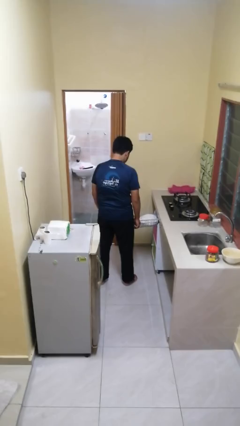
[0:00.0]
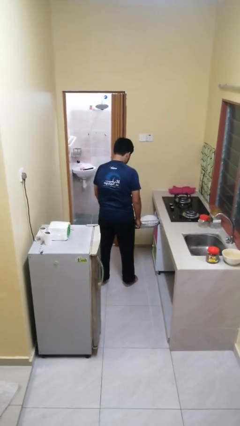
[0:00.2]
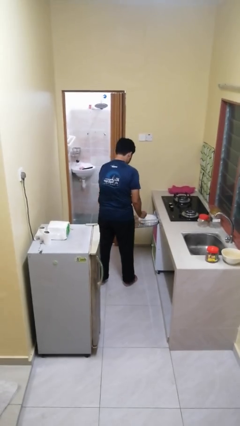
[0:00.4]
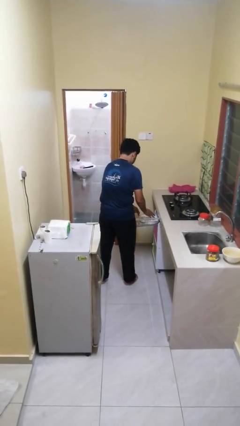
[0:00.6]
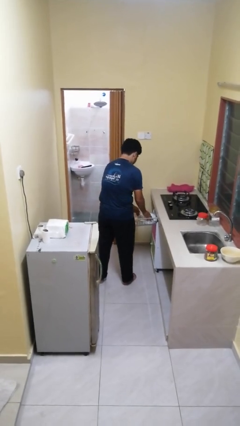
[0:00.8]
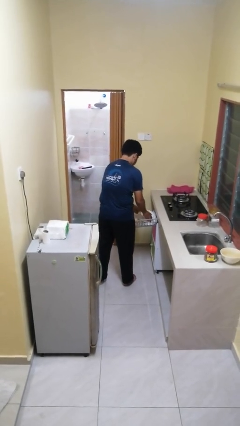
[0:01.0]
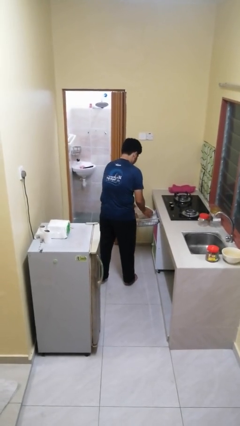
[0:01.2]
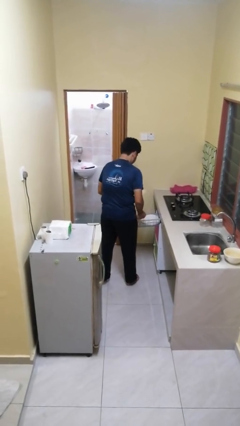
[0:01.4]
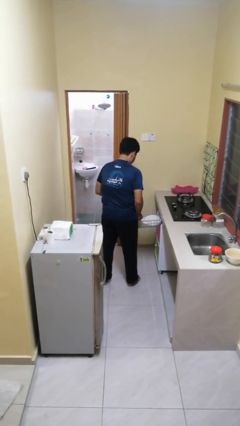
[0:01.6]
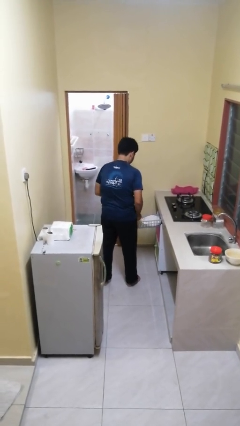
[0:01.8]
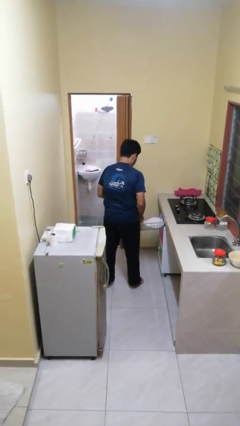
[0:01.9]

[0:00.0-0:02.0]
person takes object from kitchen drawer

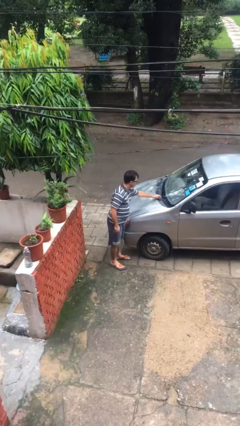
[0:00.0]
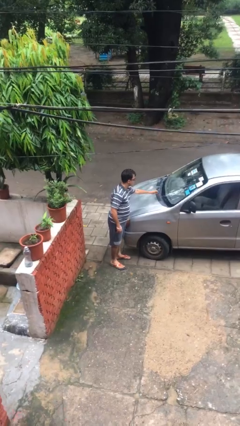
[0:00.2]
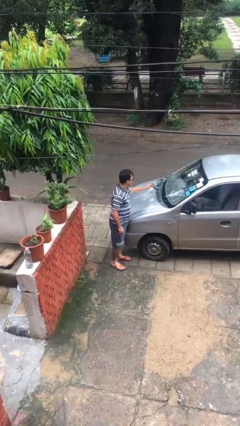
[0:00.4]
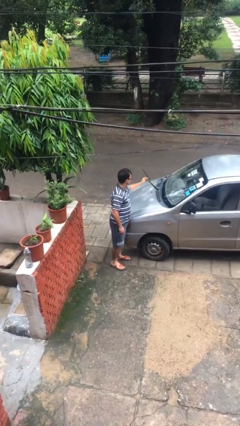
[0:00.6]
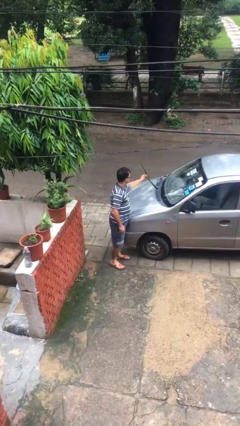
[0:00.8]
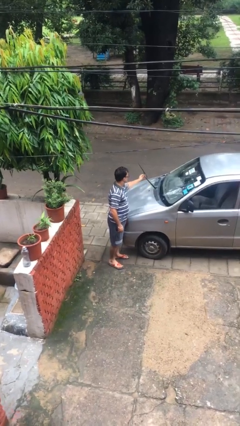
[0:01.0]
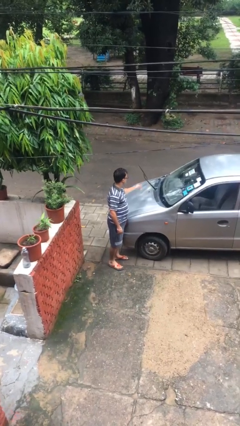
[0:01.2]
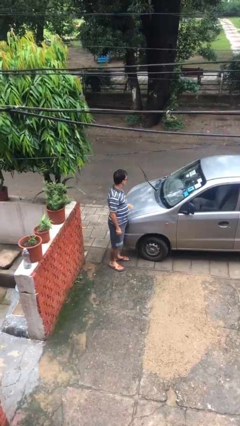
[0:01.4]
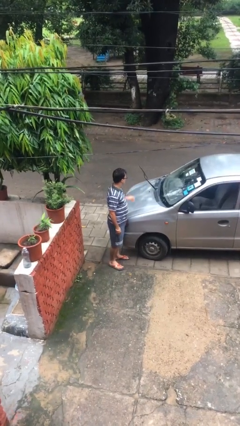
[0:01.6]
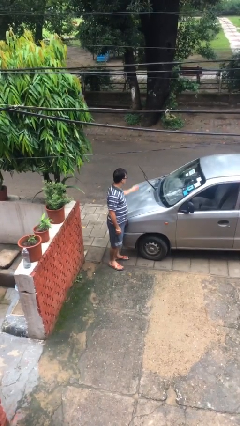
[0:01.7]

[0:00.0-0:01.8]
person flips up car wipers

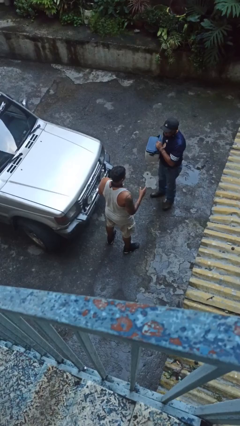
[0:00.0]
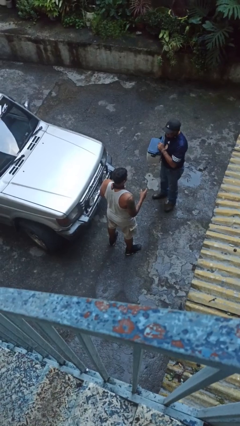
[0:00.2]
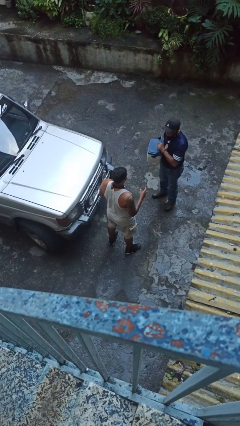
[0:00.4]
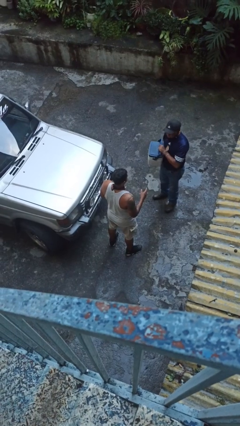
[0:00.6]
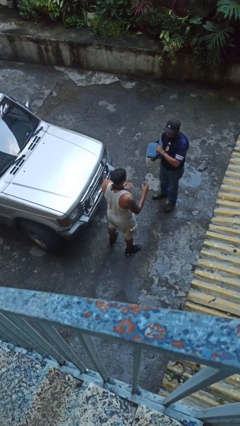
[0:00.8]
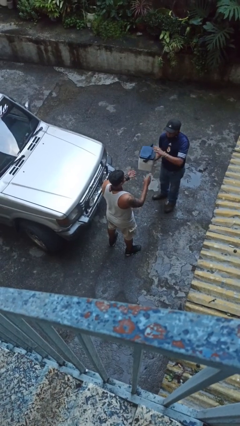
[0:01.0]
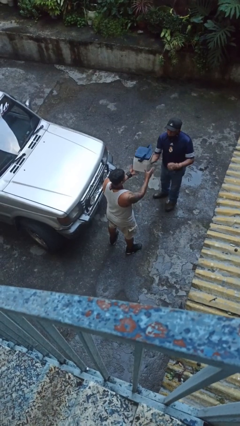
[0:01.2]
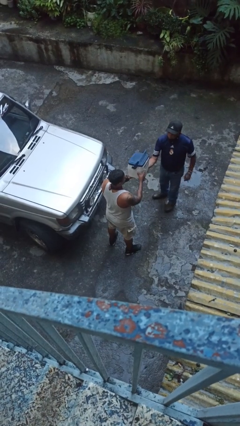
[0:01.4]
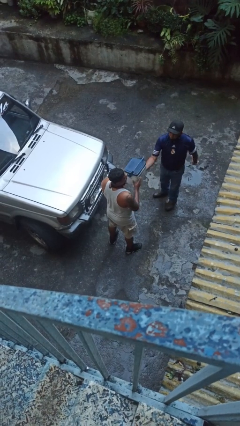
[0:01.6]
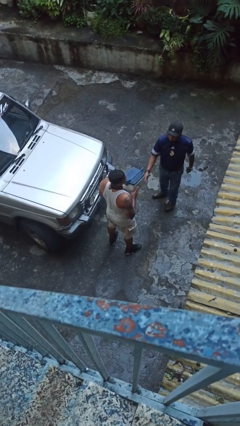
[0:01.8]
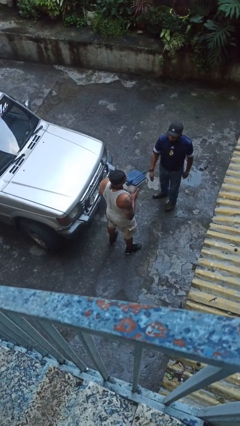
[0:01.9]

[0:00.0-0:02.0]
person transfers object to person

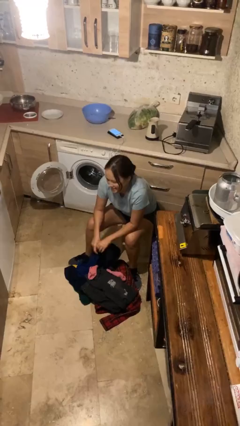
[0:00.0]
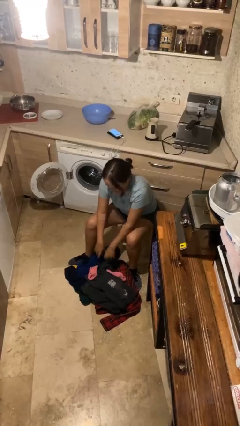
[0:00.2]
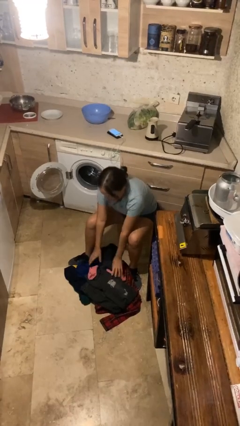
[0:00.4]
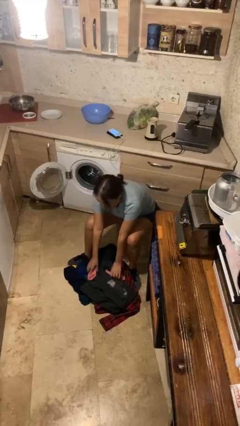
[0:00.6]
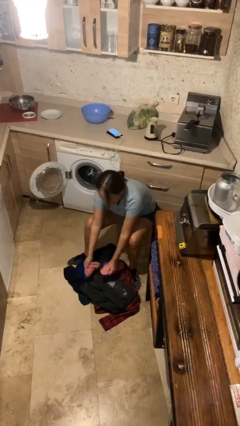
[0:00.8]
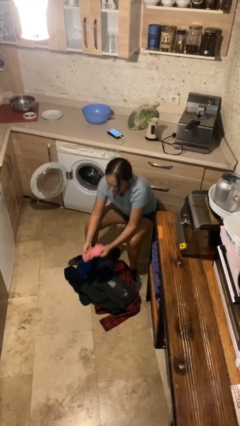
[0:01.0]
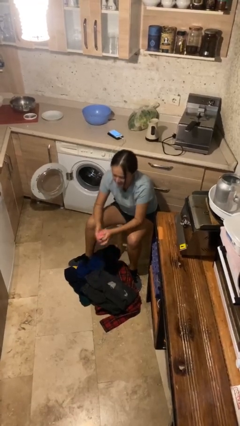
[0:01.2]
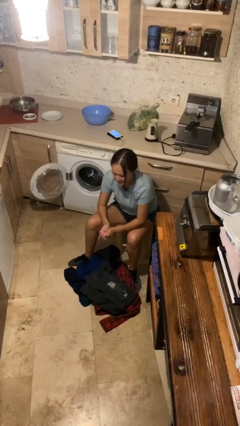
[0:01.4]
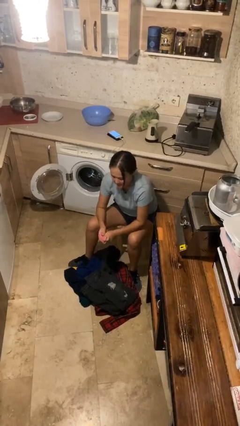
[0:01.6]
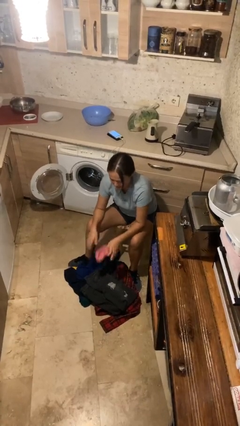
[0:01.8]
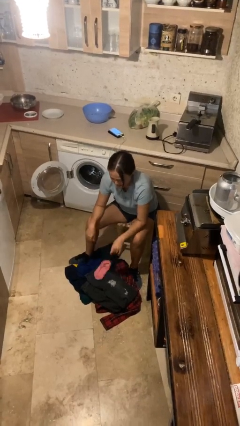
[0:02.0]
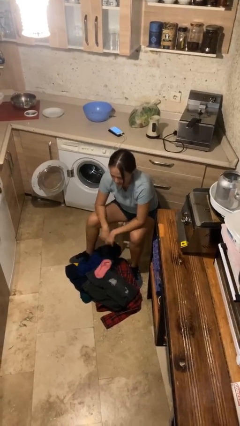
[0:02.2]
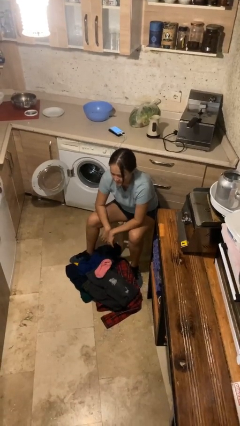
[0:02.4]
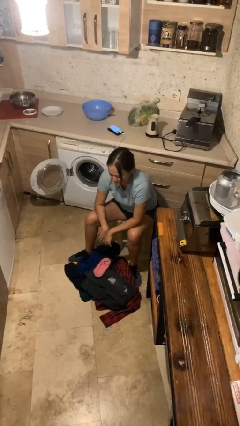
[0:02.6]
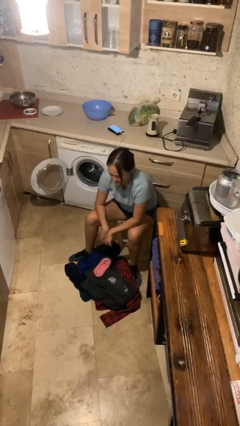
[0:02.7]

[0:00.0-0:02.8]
person folds socks

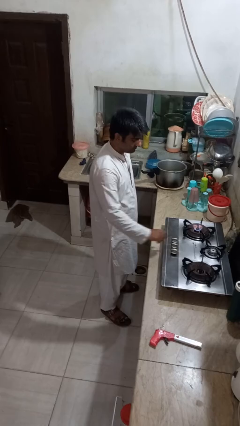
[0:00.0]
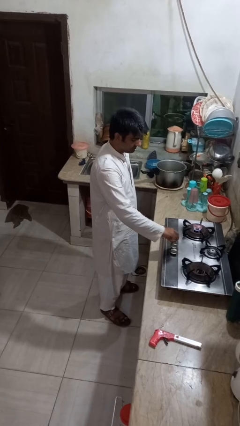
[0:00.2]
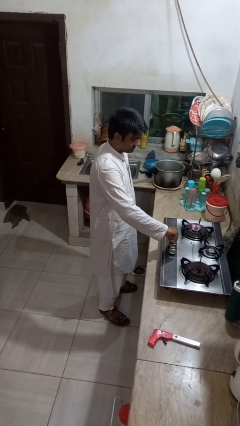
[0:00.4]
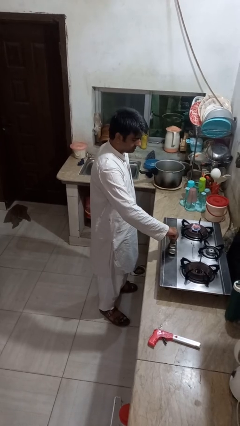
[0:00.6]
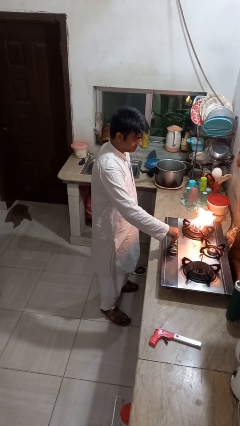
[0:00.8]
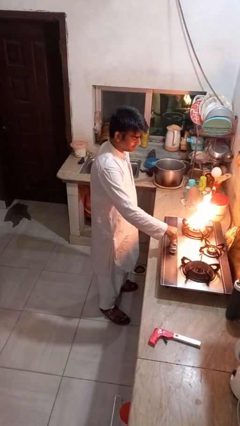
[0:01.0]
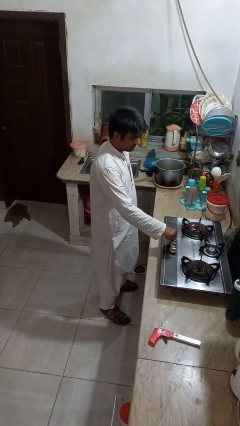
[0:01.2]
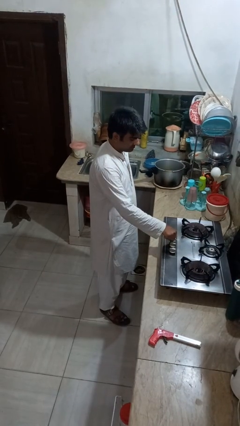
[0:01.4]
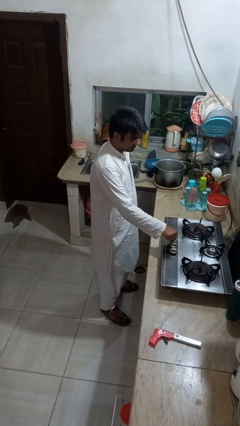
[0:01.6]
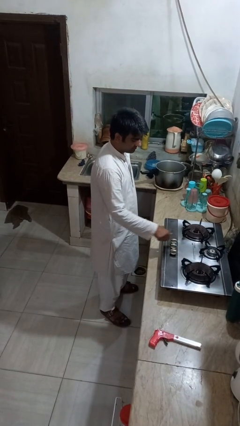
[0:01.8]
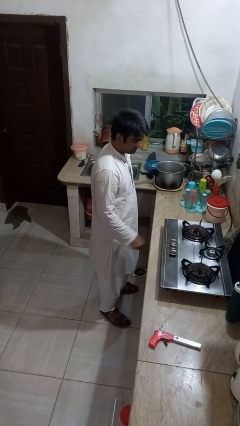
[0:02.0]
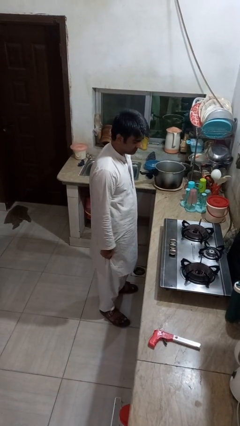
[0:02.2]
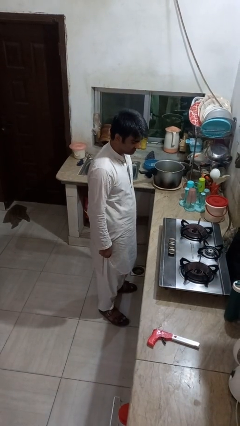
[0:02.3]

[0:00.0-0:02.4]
person turns off stovetop

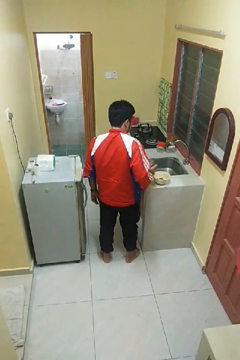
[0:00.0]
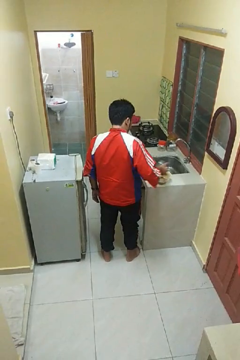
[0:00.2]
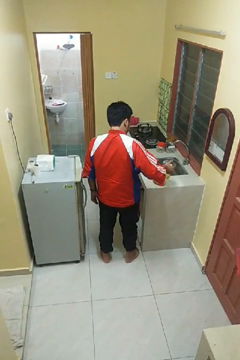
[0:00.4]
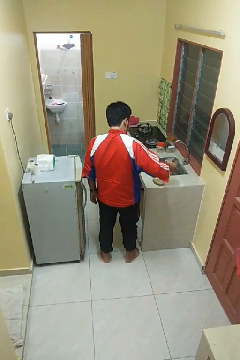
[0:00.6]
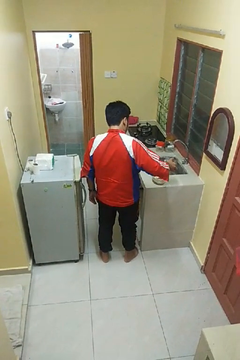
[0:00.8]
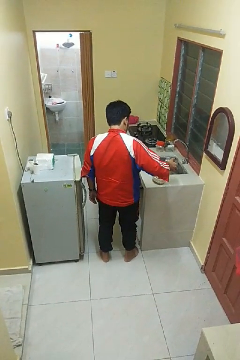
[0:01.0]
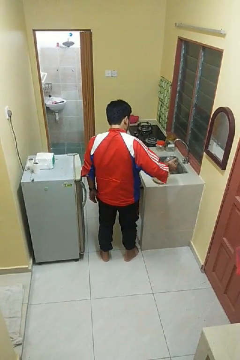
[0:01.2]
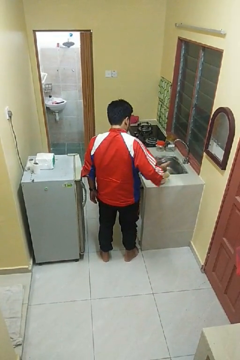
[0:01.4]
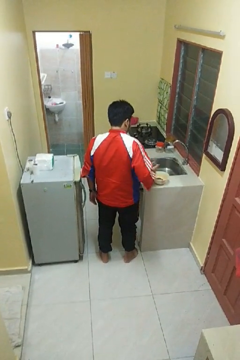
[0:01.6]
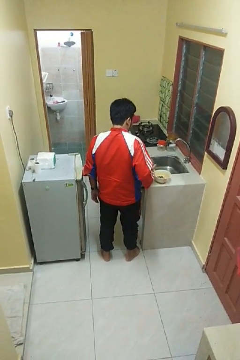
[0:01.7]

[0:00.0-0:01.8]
person pours into bowl

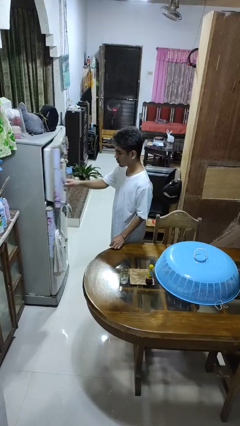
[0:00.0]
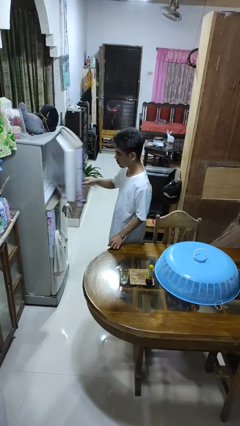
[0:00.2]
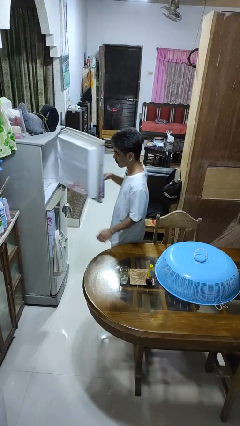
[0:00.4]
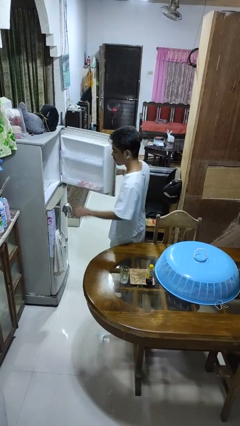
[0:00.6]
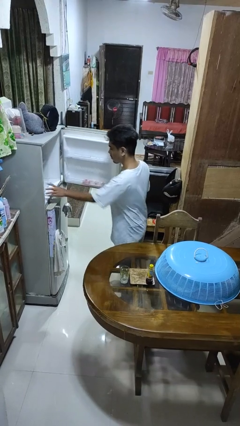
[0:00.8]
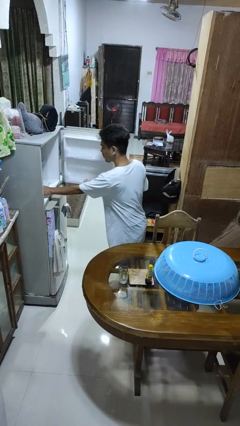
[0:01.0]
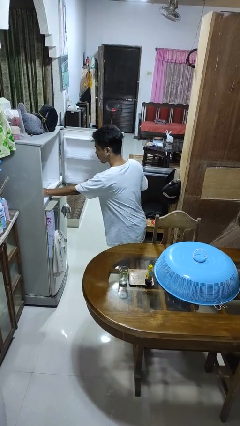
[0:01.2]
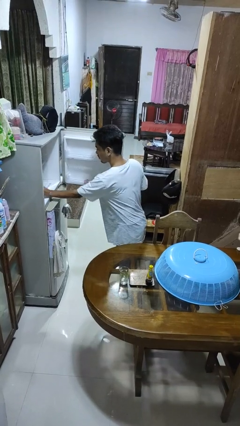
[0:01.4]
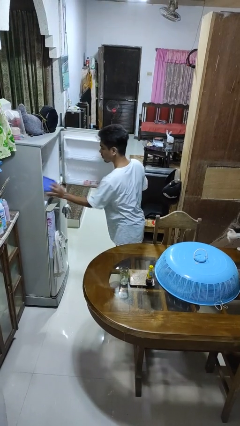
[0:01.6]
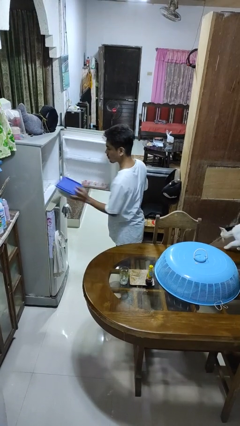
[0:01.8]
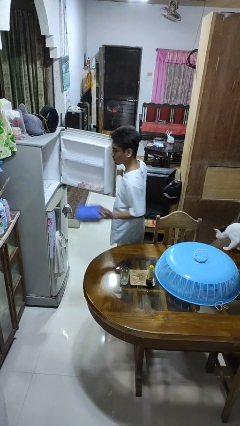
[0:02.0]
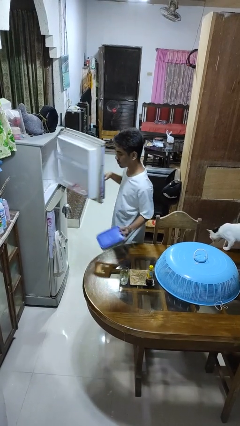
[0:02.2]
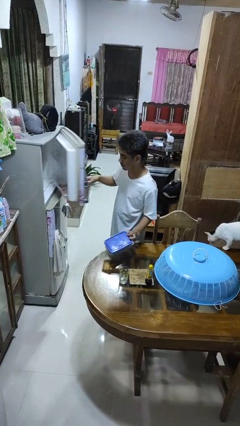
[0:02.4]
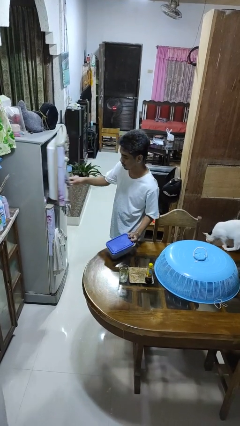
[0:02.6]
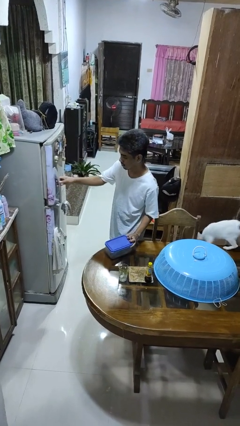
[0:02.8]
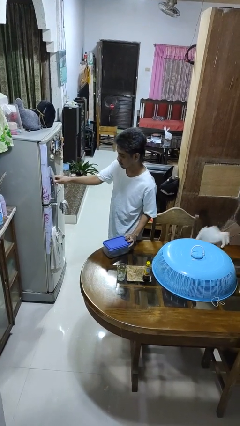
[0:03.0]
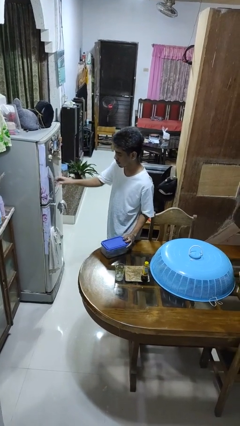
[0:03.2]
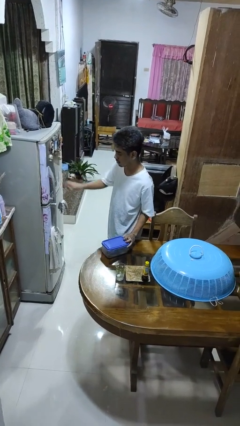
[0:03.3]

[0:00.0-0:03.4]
person takes object from refrigerator

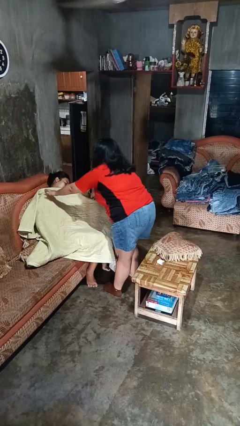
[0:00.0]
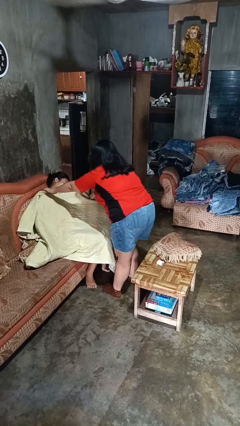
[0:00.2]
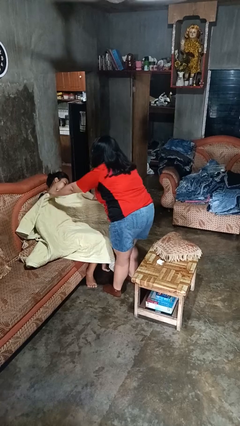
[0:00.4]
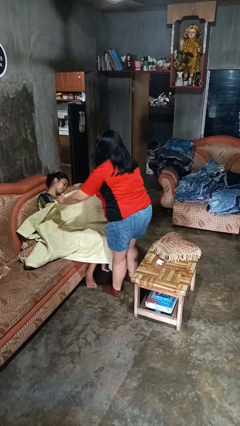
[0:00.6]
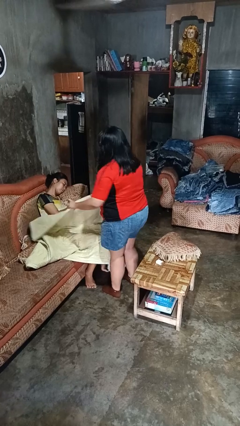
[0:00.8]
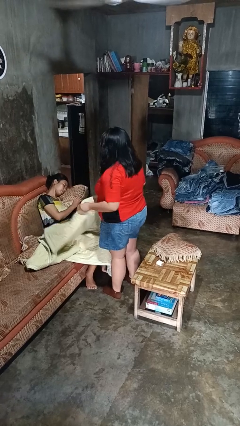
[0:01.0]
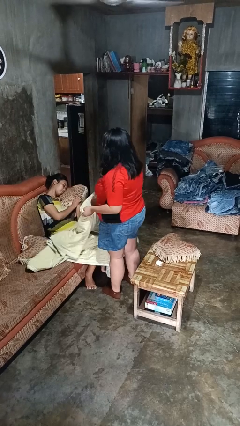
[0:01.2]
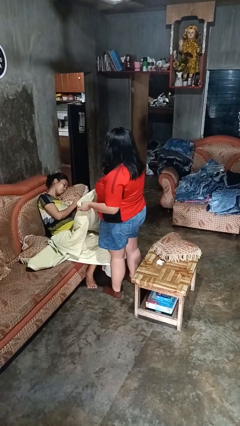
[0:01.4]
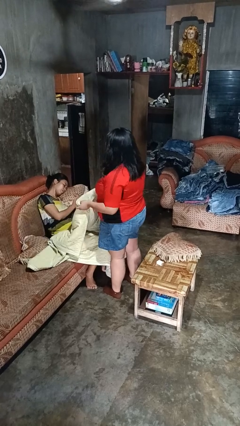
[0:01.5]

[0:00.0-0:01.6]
person uncovers friend with blanket
